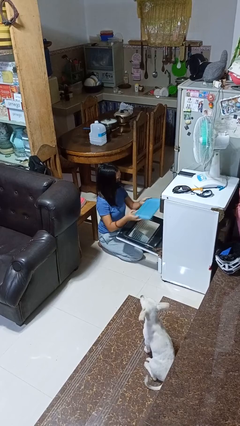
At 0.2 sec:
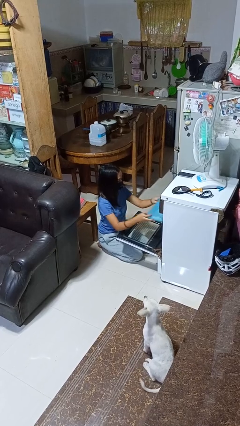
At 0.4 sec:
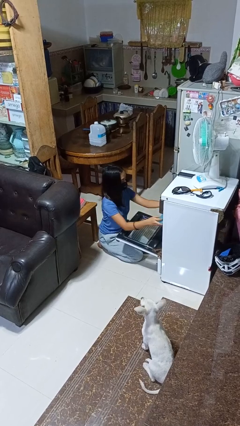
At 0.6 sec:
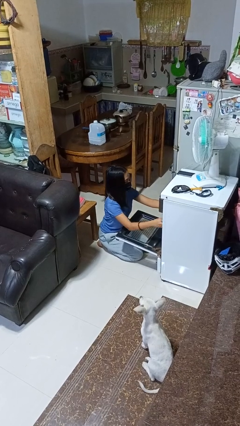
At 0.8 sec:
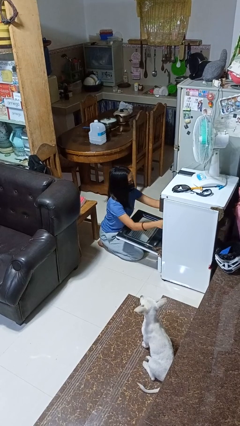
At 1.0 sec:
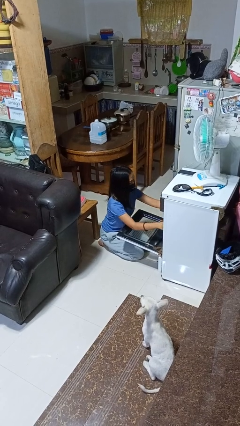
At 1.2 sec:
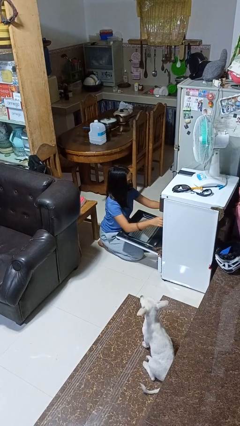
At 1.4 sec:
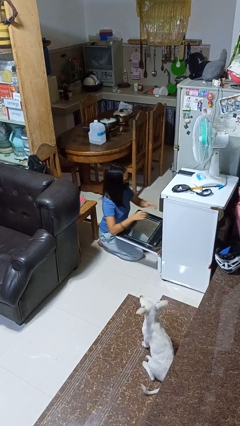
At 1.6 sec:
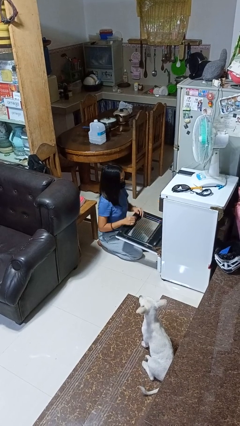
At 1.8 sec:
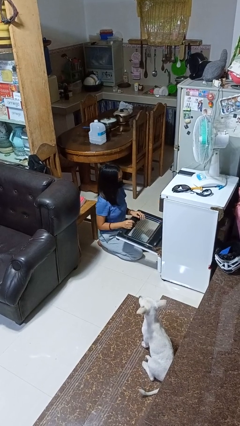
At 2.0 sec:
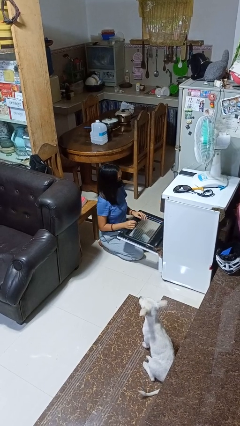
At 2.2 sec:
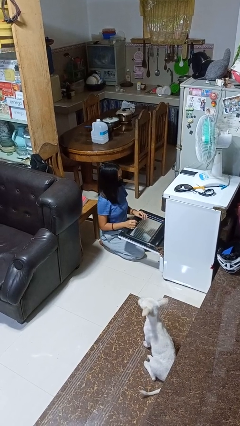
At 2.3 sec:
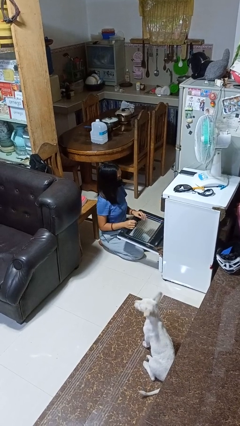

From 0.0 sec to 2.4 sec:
person puts object into oven

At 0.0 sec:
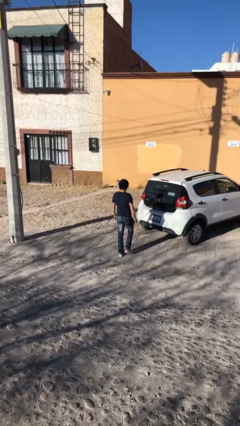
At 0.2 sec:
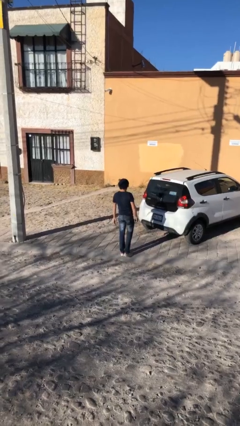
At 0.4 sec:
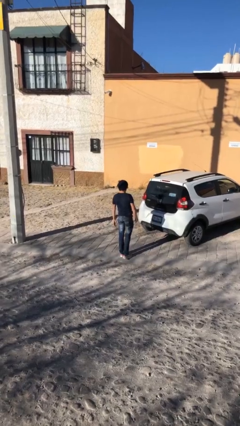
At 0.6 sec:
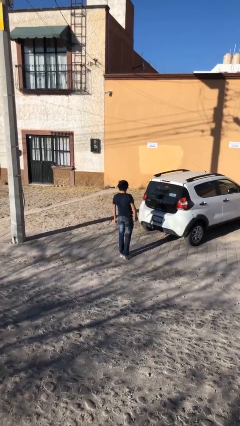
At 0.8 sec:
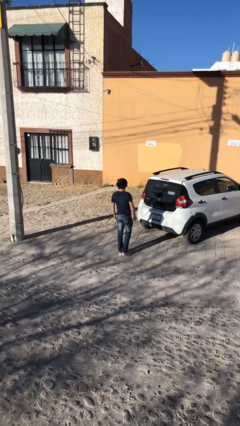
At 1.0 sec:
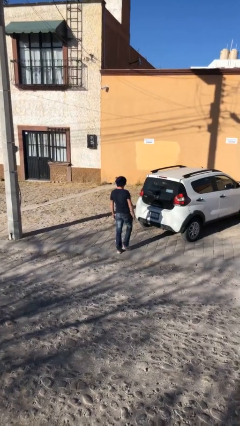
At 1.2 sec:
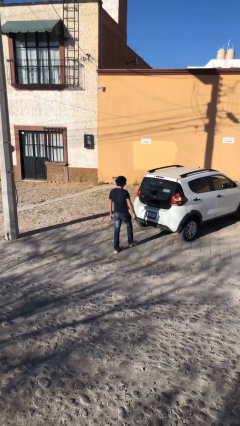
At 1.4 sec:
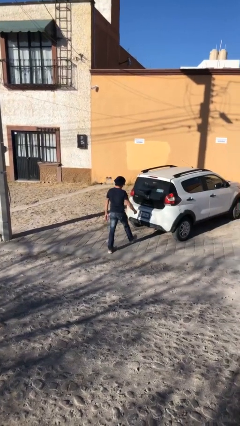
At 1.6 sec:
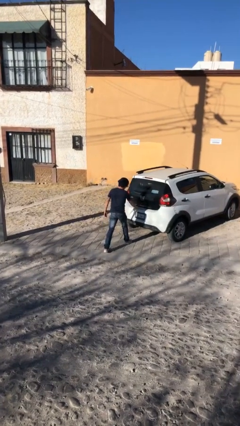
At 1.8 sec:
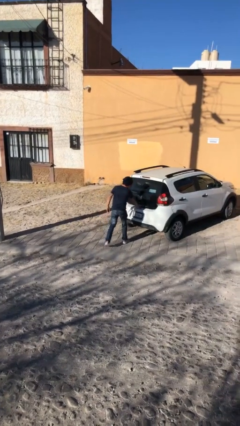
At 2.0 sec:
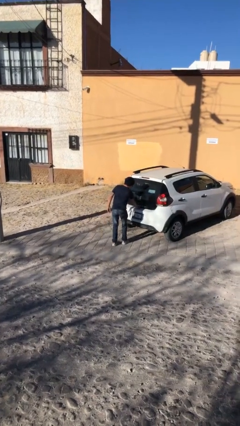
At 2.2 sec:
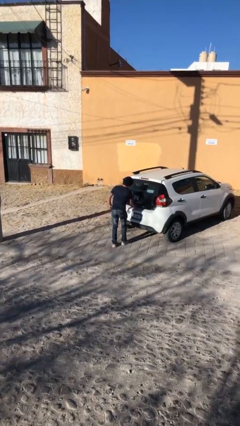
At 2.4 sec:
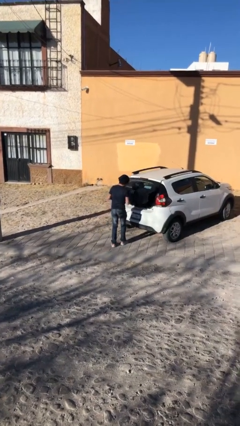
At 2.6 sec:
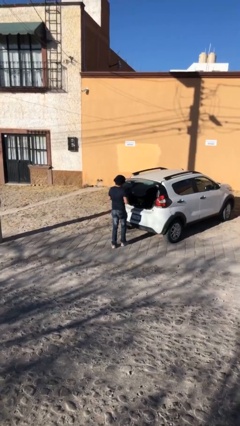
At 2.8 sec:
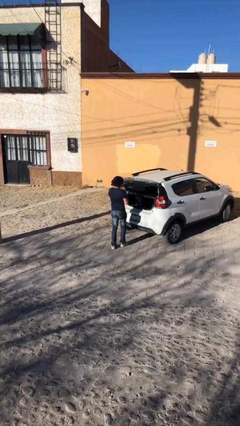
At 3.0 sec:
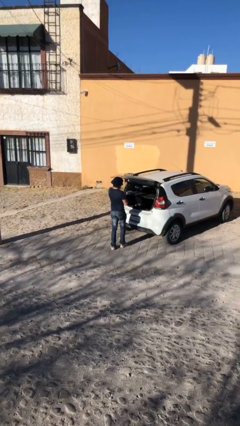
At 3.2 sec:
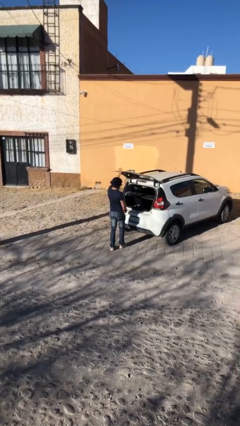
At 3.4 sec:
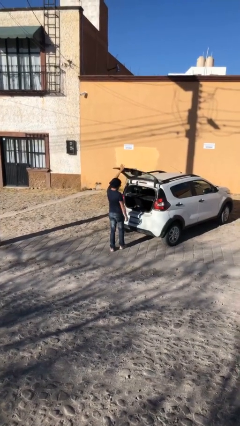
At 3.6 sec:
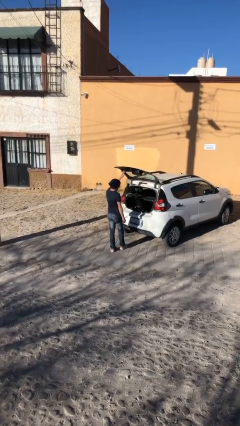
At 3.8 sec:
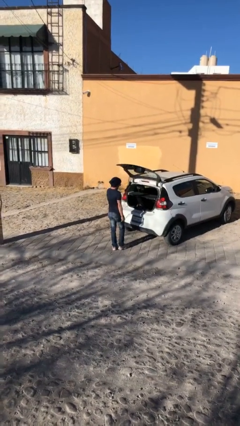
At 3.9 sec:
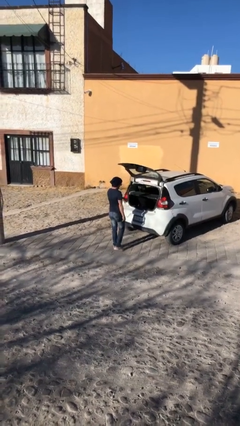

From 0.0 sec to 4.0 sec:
person opens car trunk

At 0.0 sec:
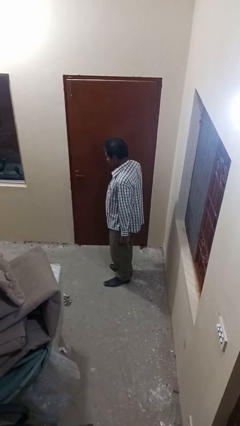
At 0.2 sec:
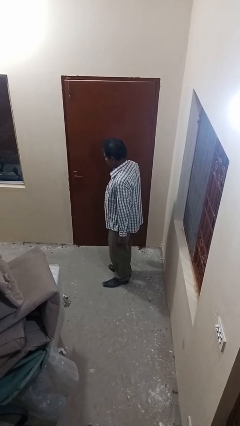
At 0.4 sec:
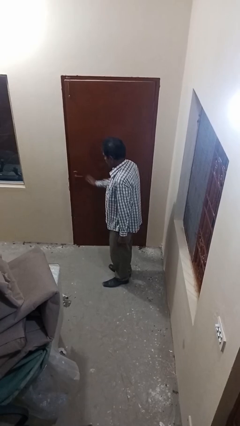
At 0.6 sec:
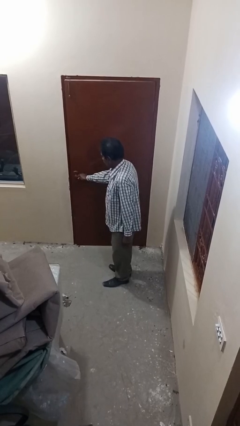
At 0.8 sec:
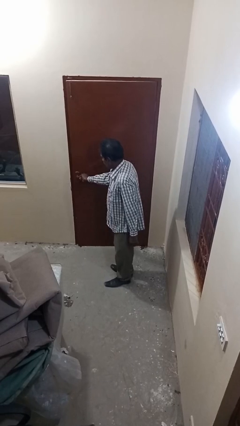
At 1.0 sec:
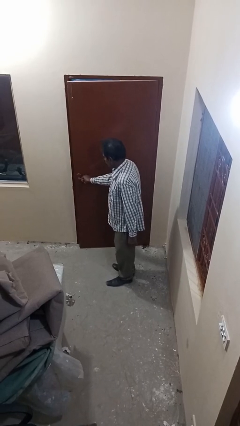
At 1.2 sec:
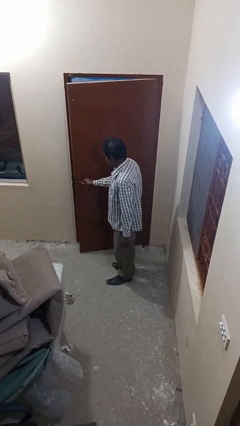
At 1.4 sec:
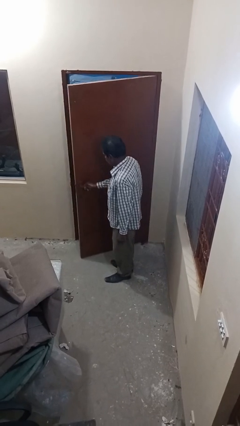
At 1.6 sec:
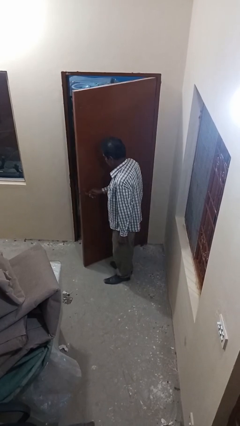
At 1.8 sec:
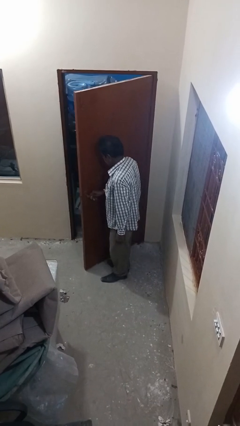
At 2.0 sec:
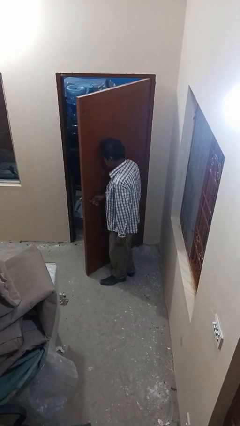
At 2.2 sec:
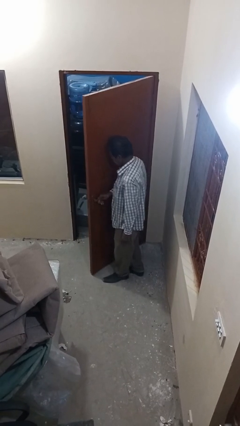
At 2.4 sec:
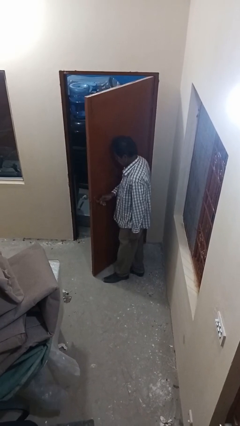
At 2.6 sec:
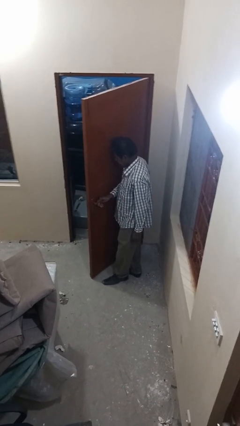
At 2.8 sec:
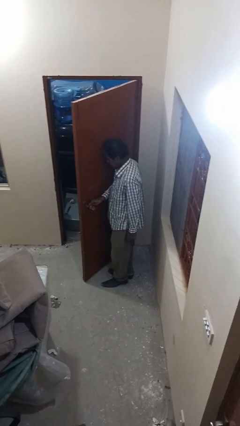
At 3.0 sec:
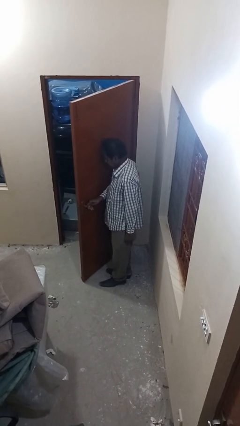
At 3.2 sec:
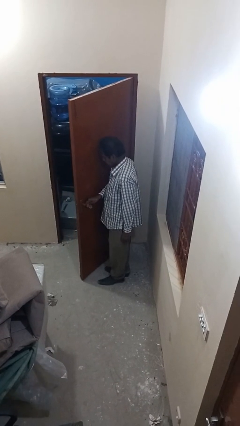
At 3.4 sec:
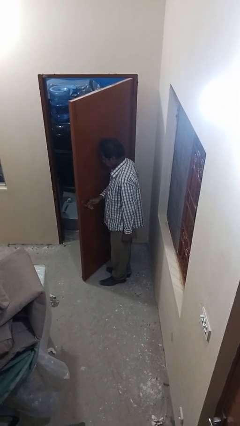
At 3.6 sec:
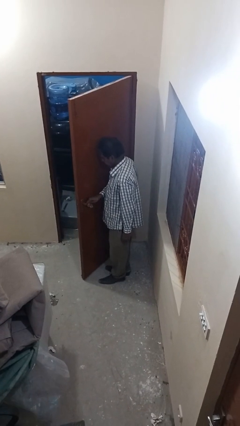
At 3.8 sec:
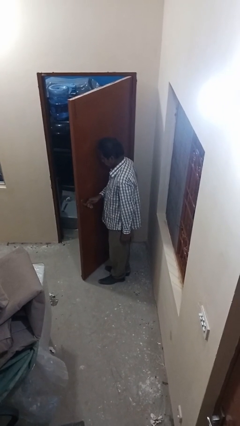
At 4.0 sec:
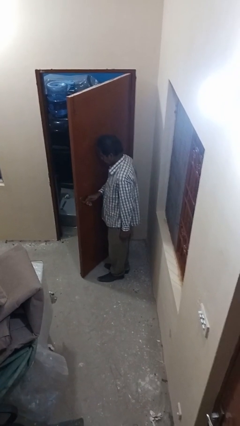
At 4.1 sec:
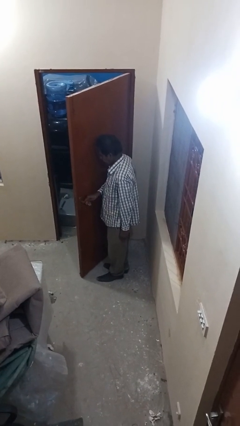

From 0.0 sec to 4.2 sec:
person opens facility door

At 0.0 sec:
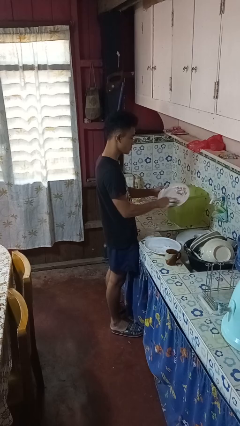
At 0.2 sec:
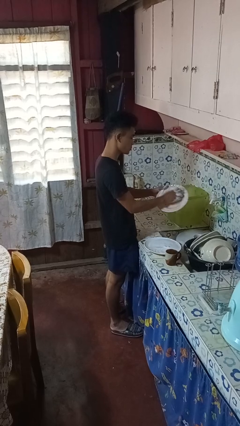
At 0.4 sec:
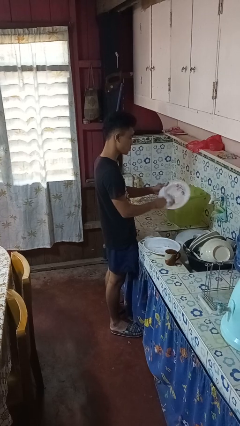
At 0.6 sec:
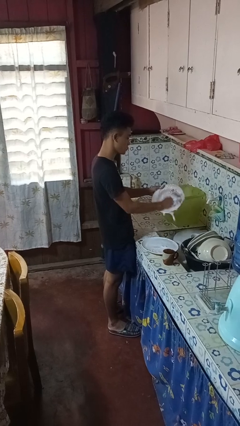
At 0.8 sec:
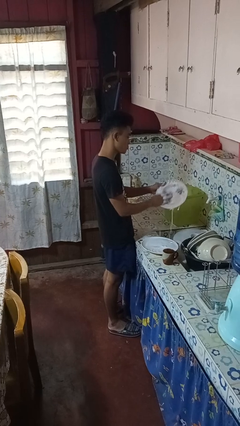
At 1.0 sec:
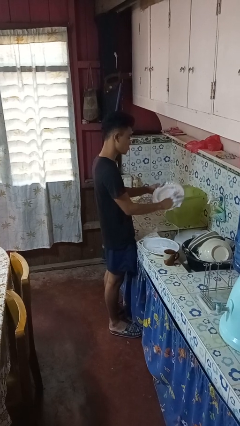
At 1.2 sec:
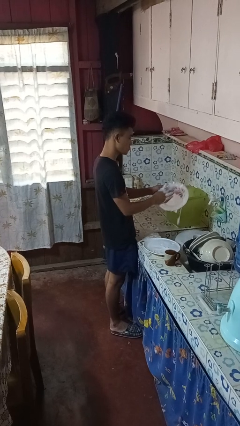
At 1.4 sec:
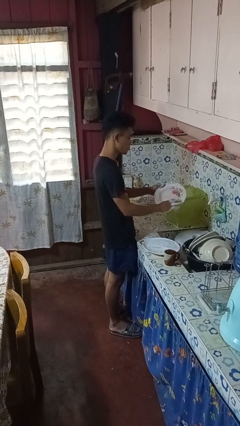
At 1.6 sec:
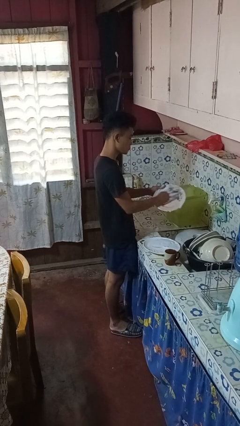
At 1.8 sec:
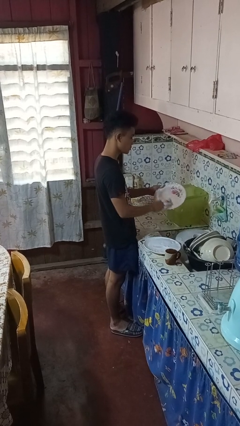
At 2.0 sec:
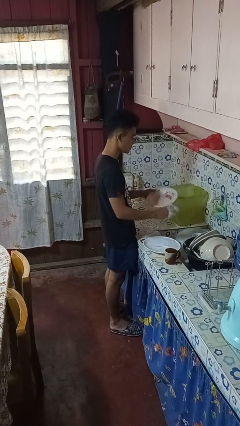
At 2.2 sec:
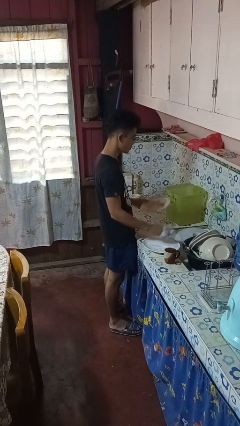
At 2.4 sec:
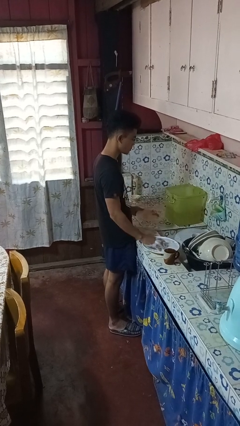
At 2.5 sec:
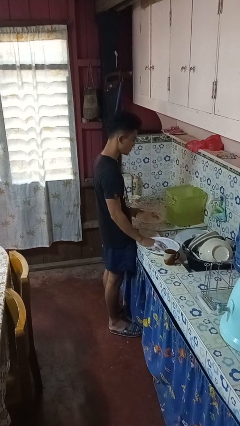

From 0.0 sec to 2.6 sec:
person washes dish

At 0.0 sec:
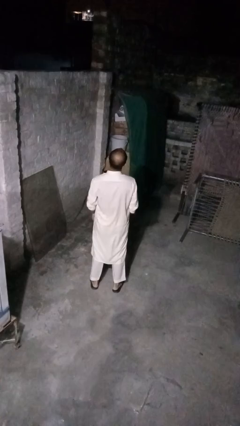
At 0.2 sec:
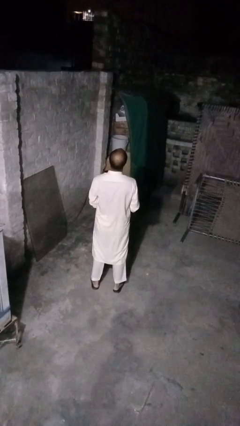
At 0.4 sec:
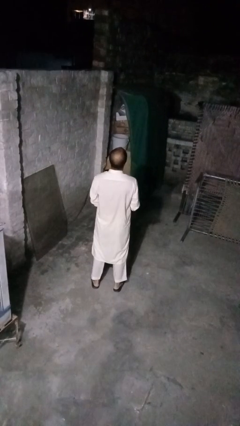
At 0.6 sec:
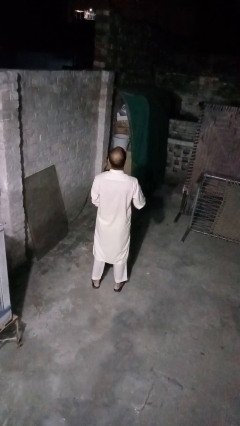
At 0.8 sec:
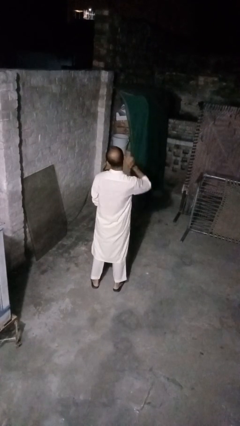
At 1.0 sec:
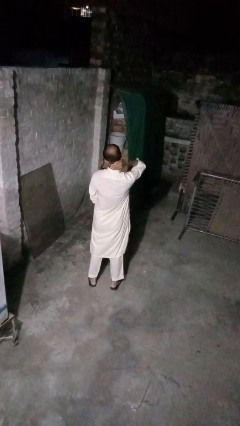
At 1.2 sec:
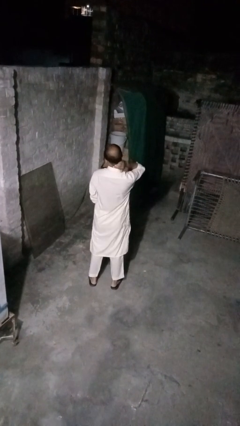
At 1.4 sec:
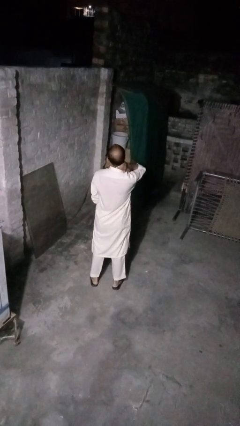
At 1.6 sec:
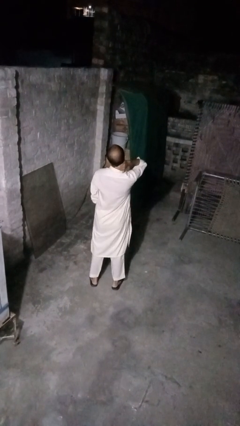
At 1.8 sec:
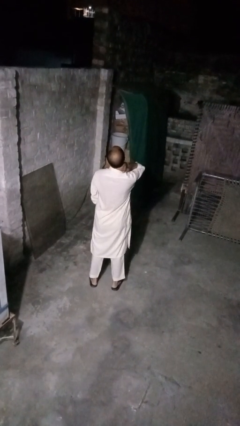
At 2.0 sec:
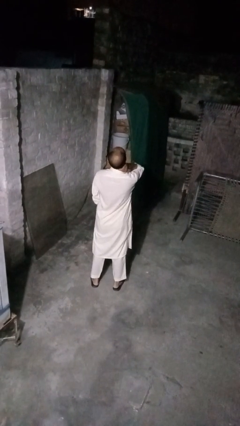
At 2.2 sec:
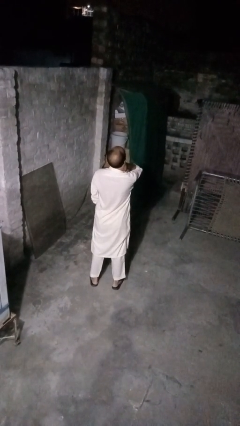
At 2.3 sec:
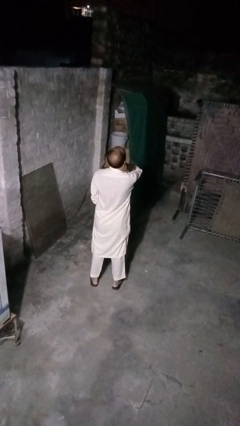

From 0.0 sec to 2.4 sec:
person rubs neck

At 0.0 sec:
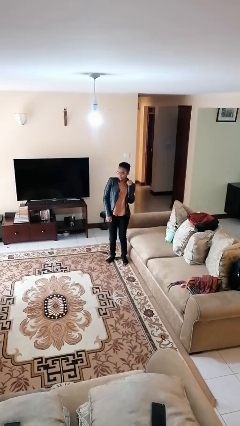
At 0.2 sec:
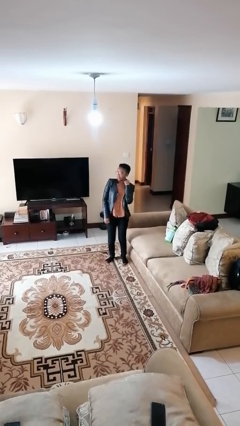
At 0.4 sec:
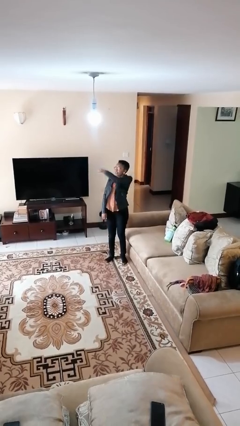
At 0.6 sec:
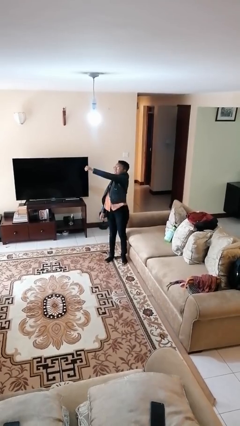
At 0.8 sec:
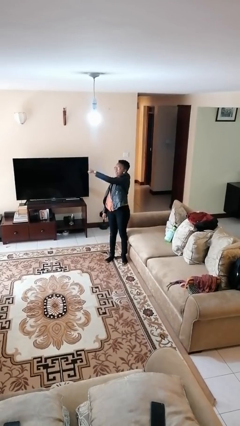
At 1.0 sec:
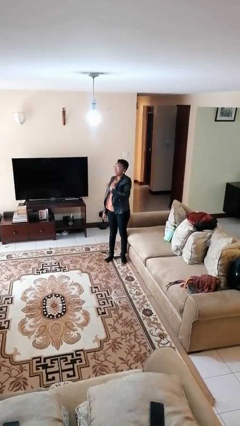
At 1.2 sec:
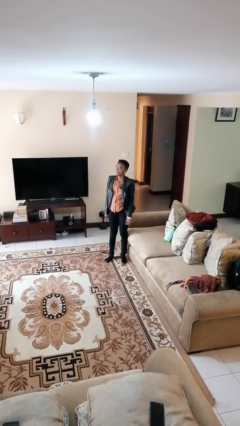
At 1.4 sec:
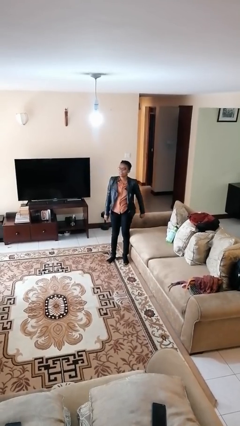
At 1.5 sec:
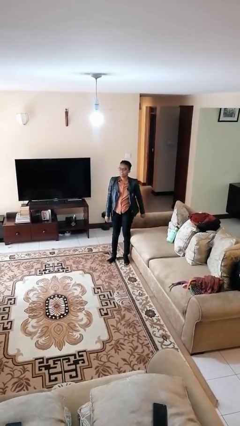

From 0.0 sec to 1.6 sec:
person punches

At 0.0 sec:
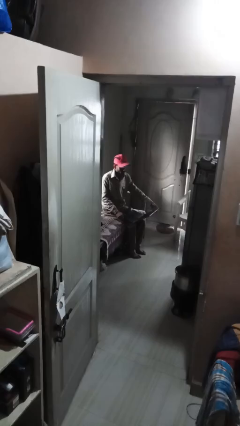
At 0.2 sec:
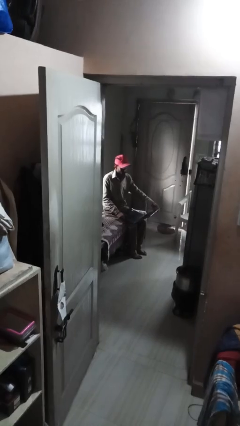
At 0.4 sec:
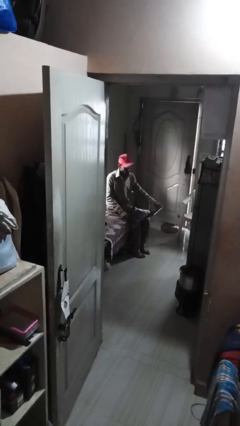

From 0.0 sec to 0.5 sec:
person closes laptop
